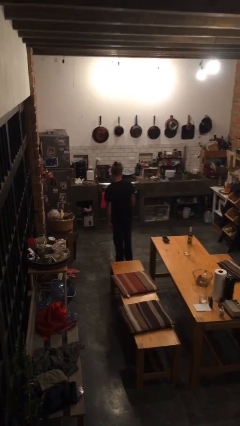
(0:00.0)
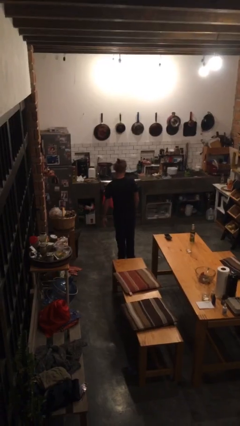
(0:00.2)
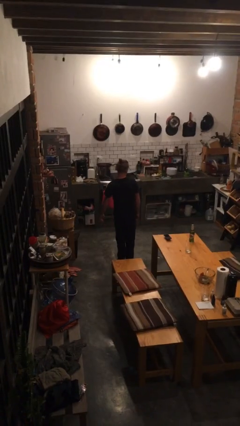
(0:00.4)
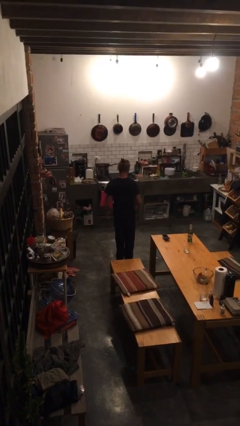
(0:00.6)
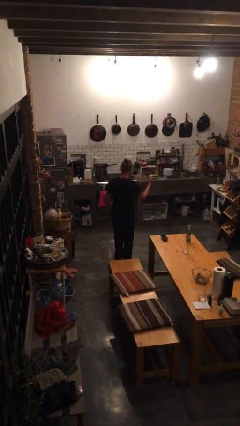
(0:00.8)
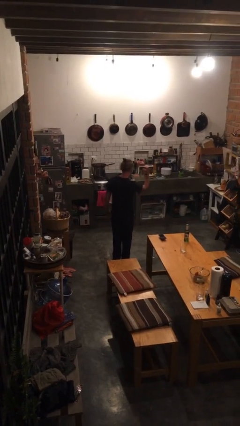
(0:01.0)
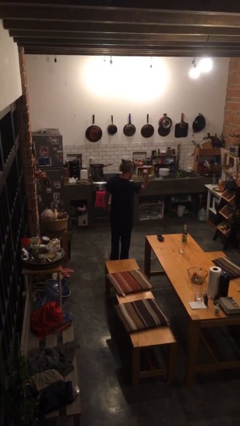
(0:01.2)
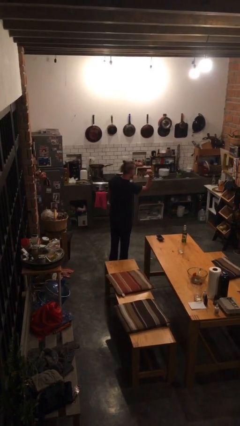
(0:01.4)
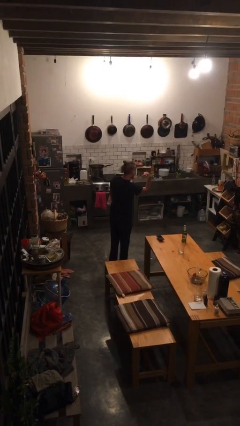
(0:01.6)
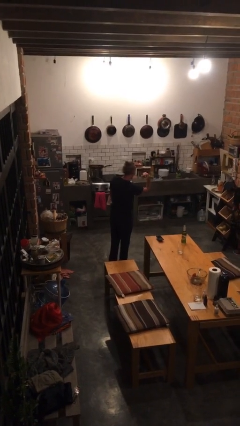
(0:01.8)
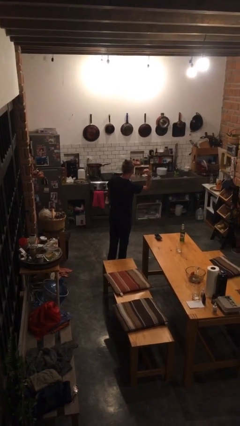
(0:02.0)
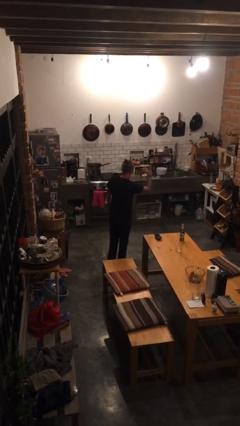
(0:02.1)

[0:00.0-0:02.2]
person gestures behind me

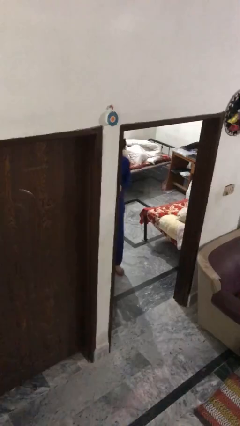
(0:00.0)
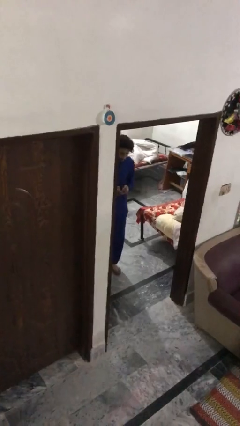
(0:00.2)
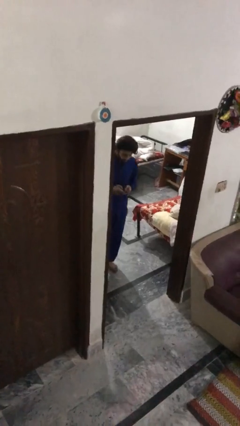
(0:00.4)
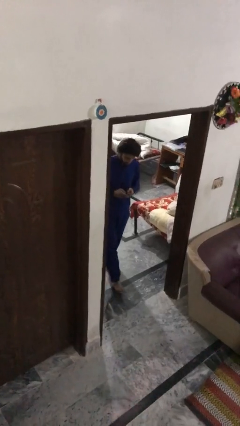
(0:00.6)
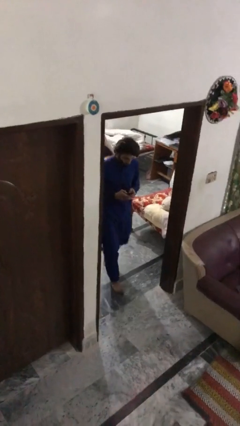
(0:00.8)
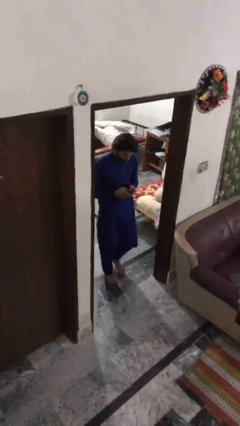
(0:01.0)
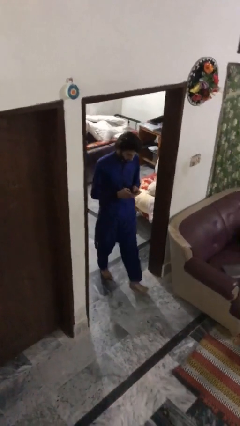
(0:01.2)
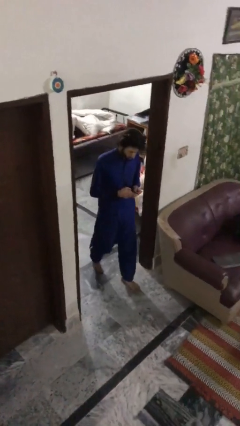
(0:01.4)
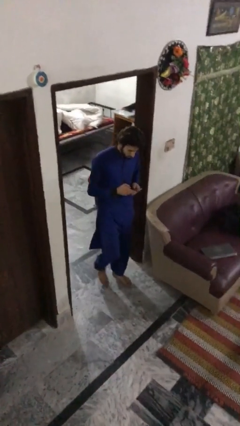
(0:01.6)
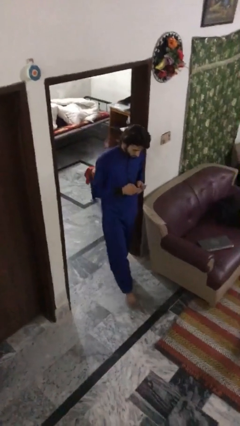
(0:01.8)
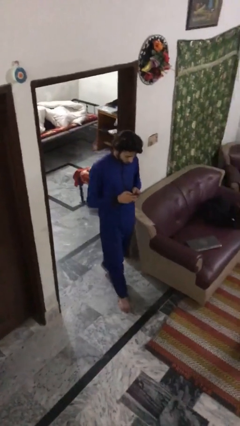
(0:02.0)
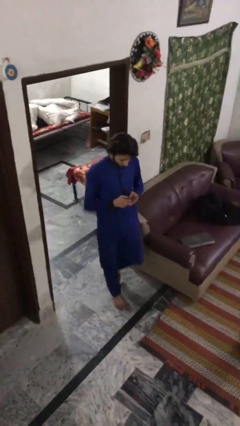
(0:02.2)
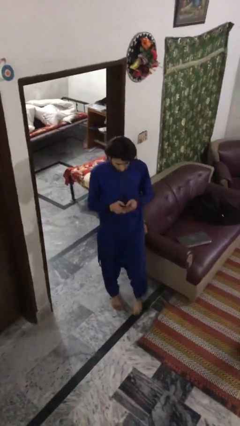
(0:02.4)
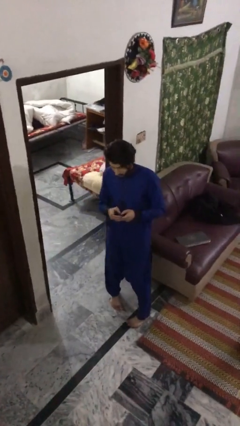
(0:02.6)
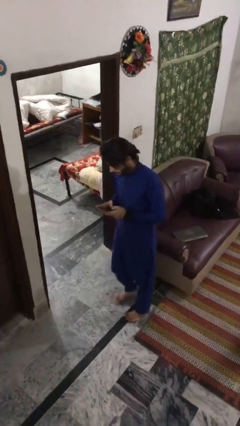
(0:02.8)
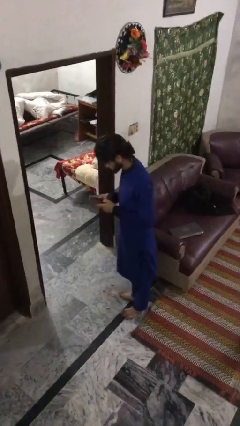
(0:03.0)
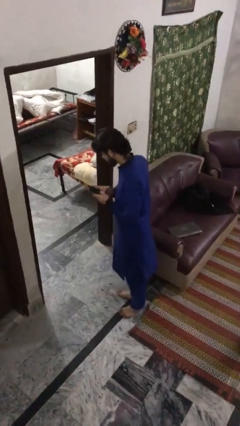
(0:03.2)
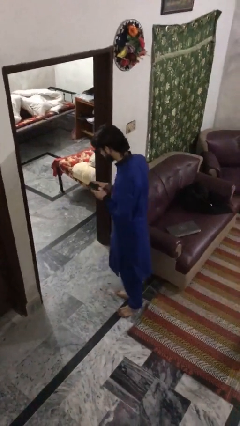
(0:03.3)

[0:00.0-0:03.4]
person enters scene through structure

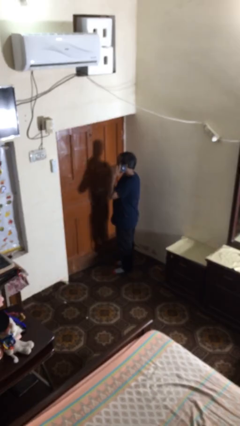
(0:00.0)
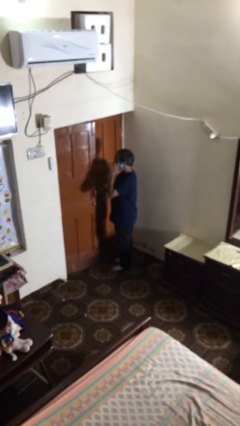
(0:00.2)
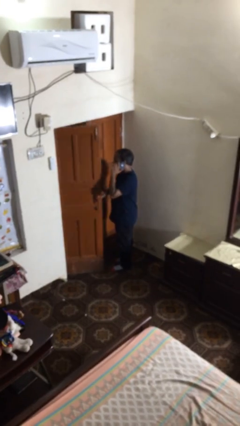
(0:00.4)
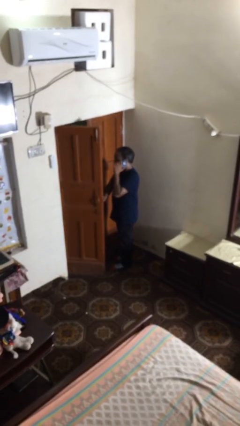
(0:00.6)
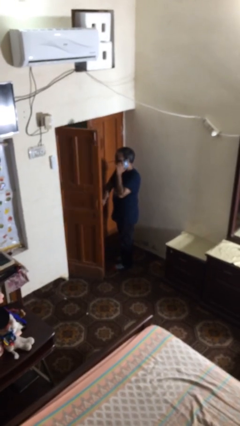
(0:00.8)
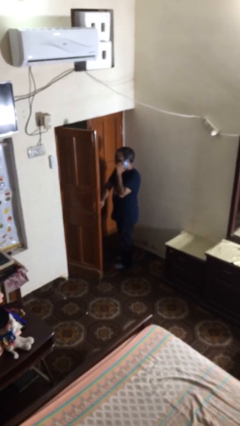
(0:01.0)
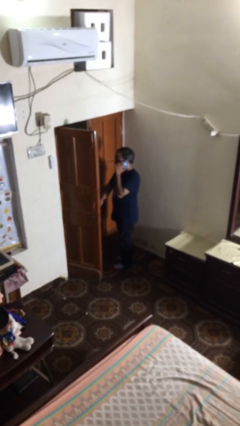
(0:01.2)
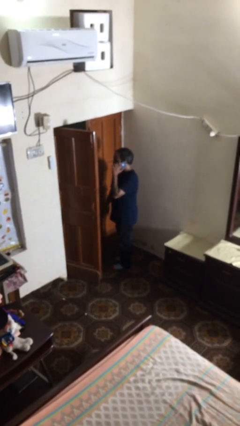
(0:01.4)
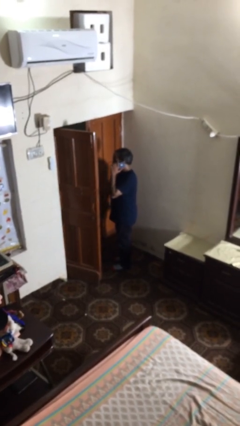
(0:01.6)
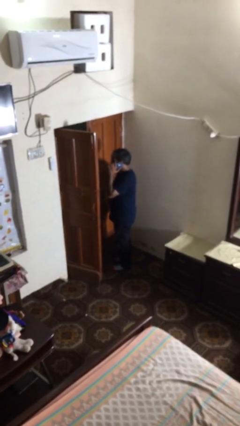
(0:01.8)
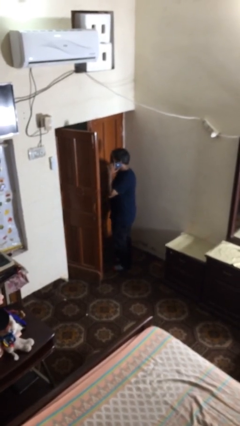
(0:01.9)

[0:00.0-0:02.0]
person opens facility door

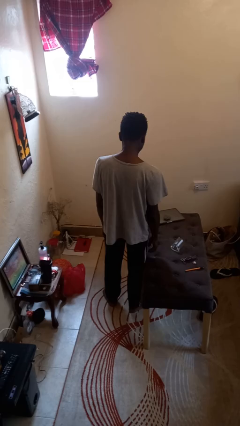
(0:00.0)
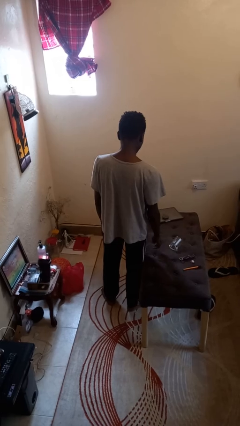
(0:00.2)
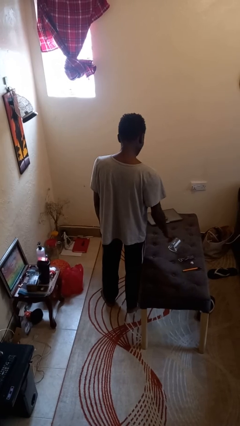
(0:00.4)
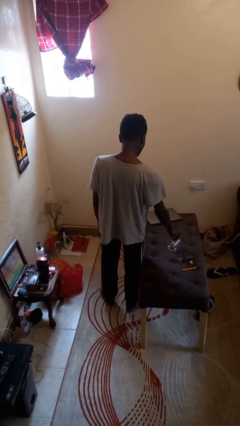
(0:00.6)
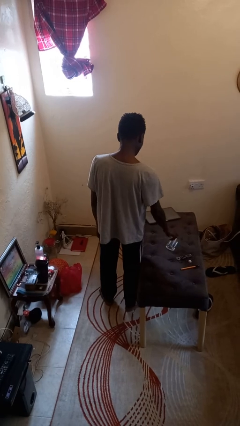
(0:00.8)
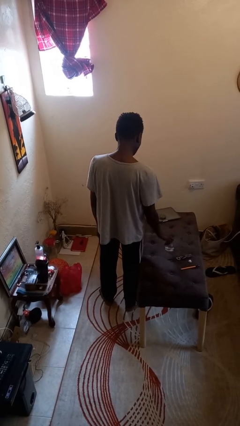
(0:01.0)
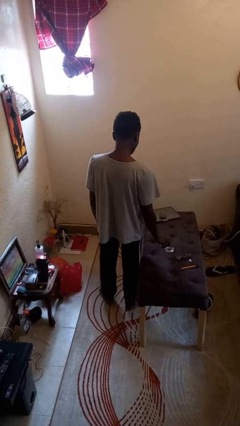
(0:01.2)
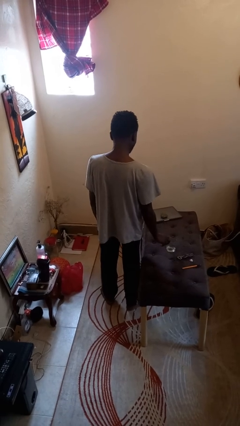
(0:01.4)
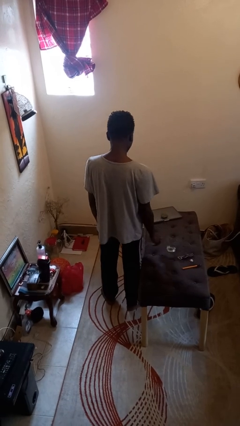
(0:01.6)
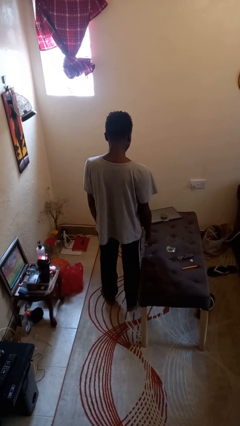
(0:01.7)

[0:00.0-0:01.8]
person sets upright glass

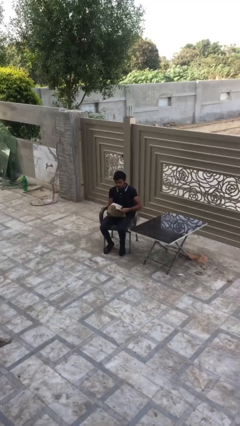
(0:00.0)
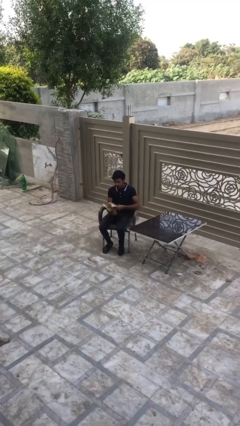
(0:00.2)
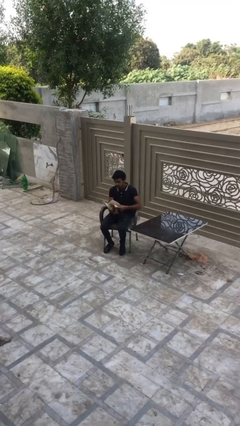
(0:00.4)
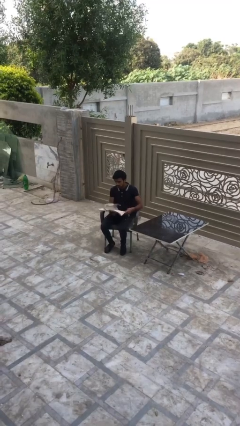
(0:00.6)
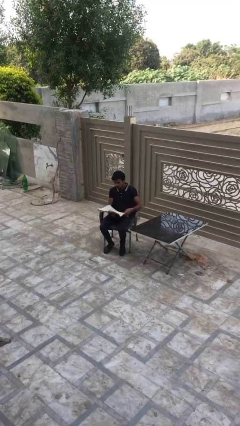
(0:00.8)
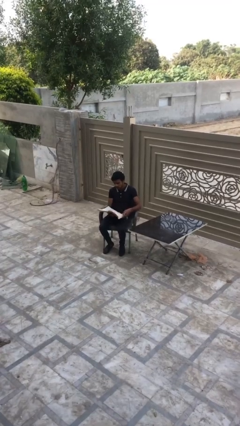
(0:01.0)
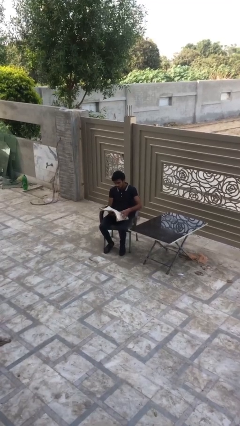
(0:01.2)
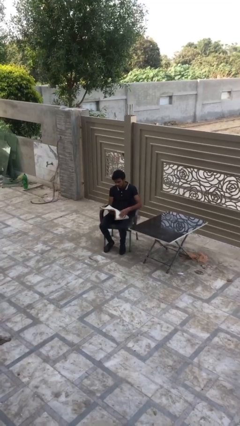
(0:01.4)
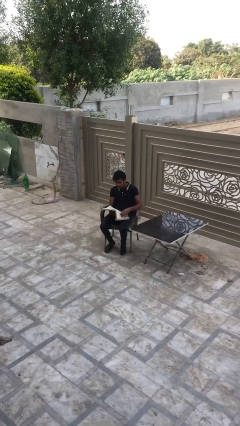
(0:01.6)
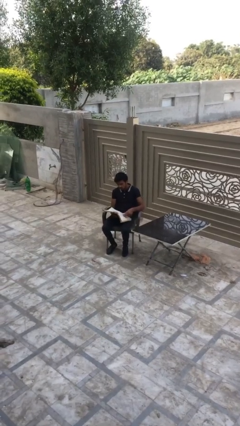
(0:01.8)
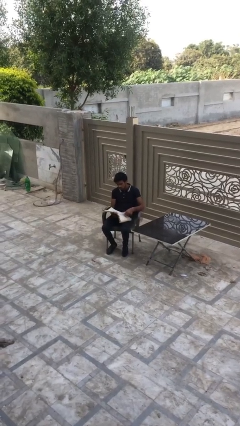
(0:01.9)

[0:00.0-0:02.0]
person reads document

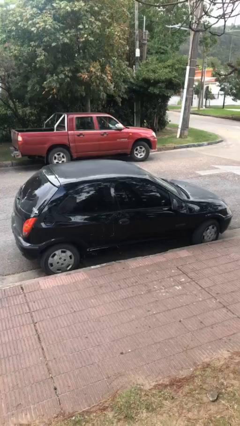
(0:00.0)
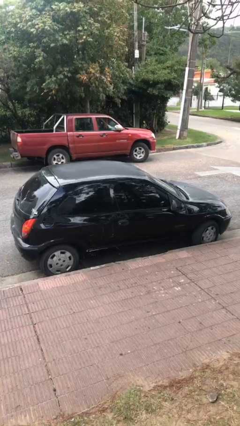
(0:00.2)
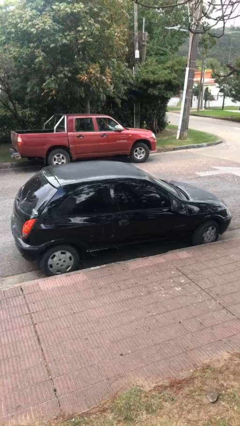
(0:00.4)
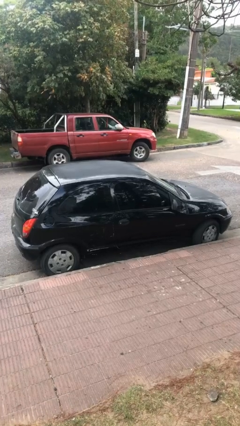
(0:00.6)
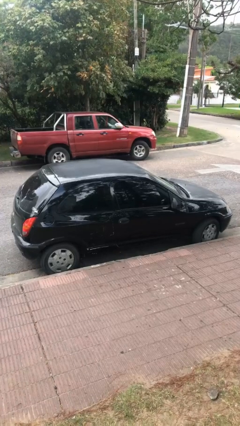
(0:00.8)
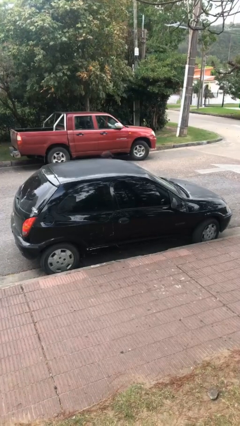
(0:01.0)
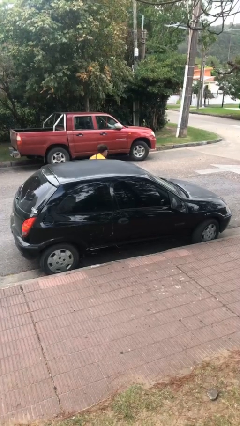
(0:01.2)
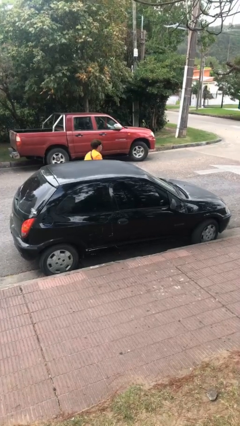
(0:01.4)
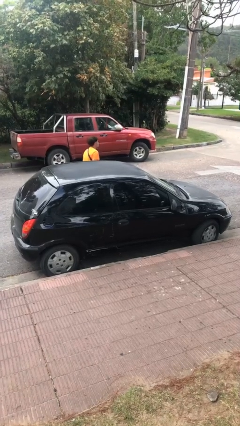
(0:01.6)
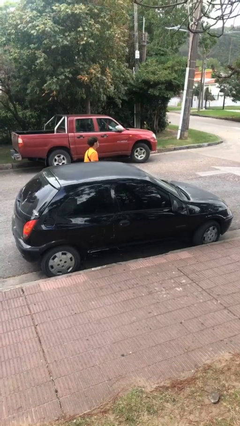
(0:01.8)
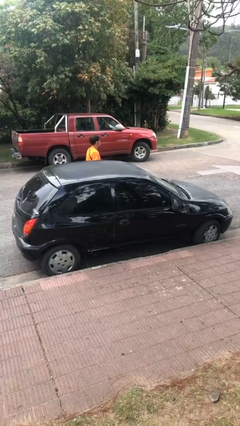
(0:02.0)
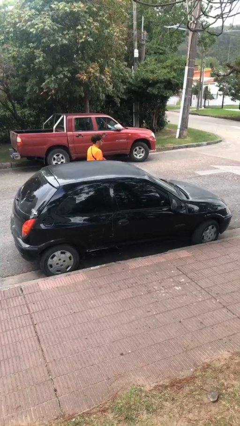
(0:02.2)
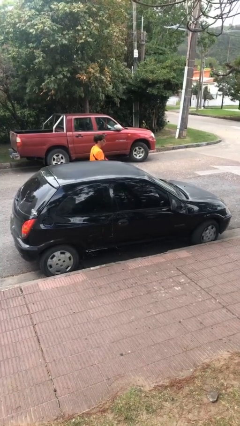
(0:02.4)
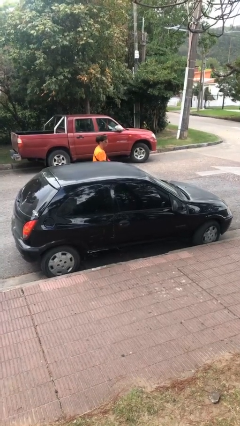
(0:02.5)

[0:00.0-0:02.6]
car drops off person

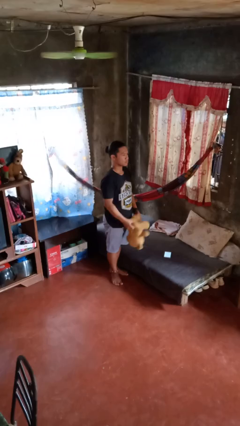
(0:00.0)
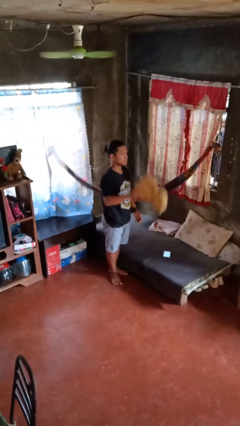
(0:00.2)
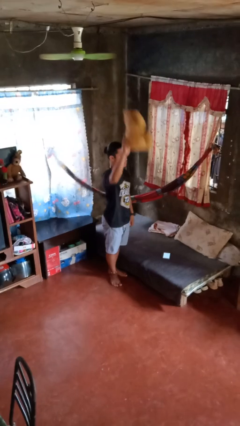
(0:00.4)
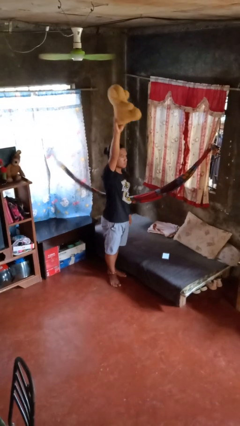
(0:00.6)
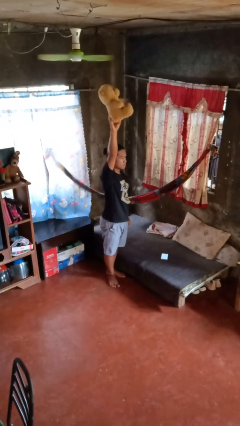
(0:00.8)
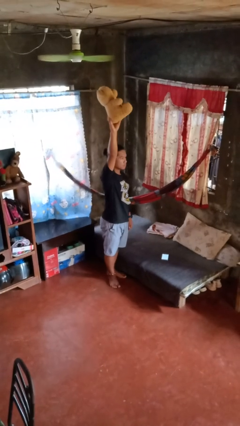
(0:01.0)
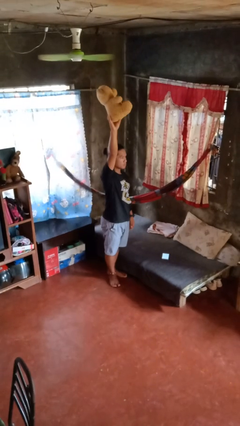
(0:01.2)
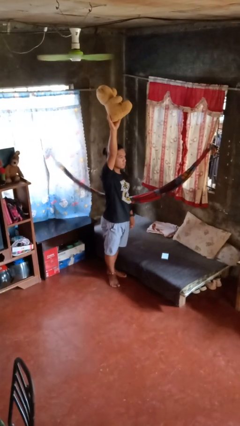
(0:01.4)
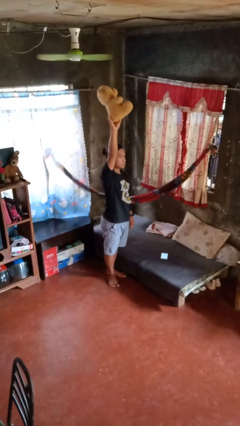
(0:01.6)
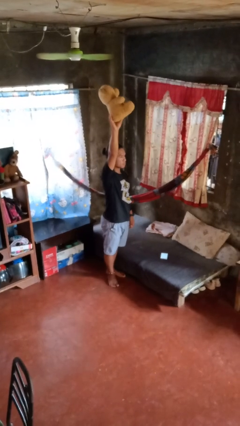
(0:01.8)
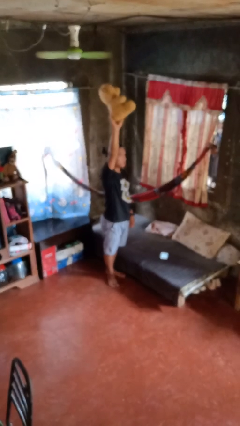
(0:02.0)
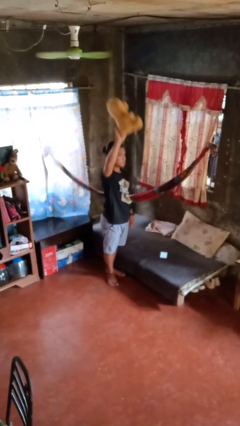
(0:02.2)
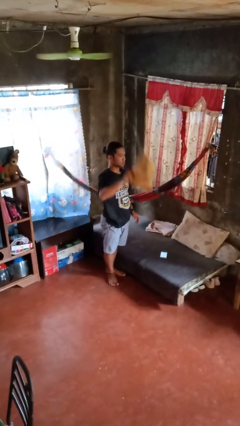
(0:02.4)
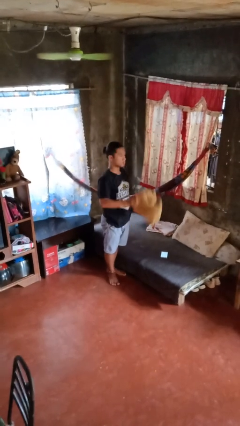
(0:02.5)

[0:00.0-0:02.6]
person holds object above head

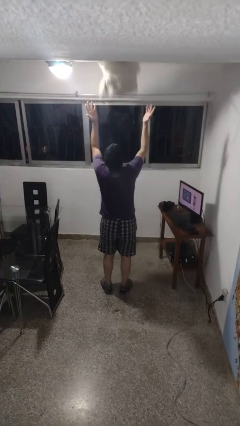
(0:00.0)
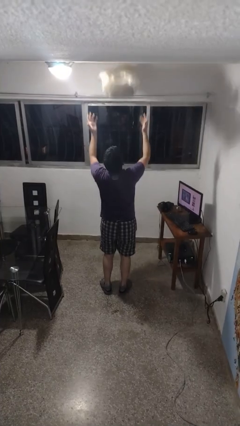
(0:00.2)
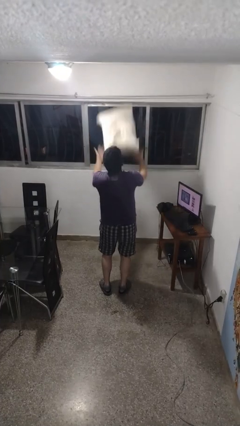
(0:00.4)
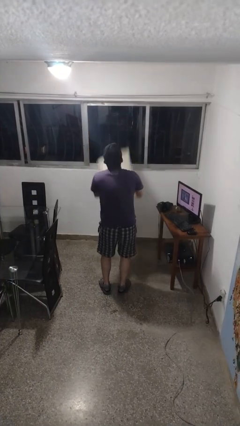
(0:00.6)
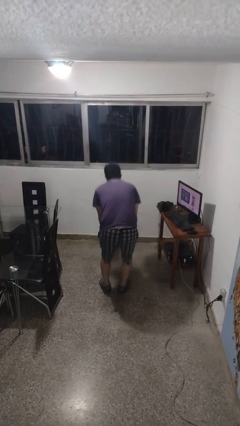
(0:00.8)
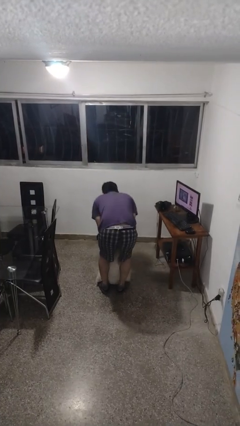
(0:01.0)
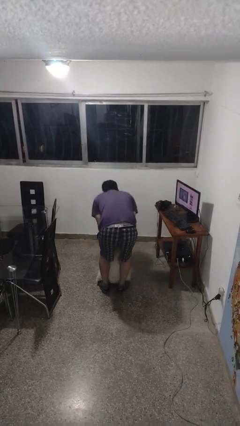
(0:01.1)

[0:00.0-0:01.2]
person catches dropped object
